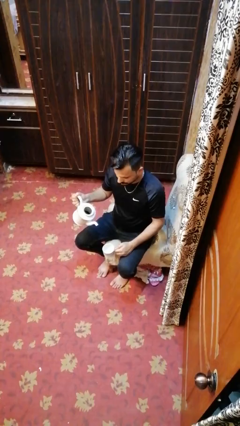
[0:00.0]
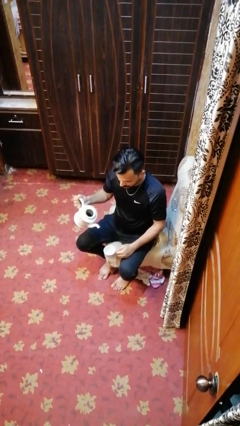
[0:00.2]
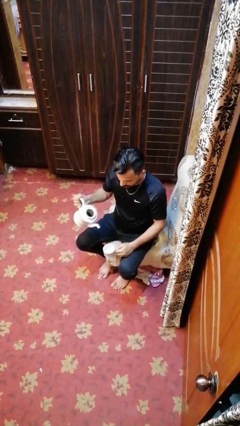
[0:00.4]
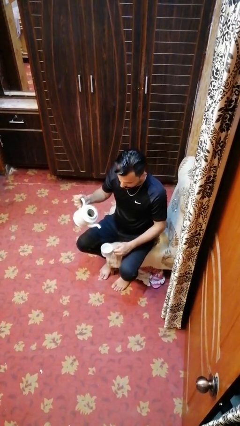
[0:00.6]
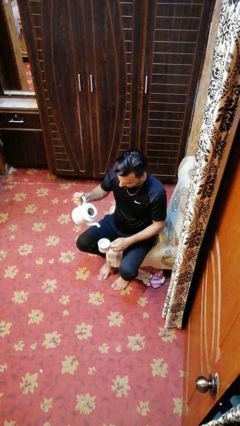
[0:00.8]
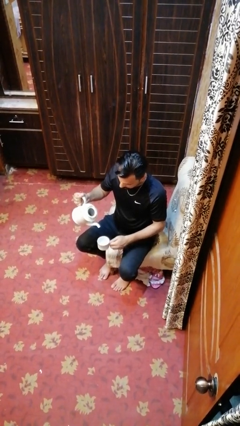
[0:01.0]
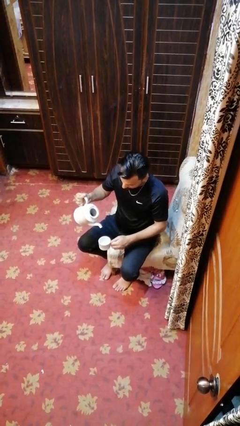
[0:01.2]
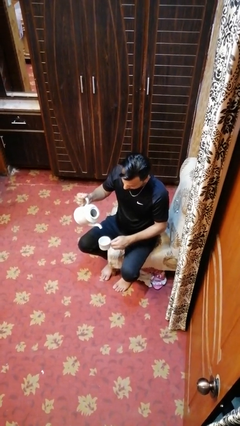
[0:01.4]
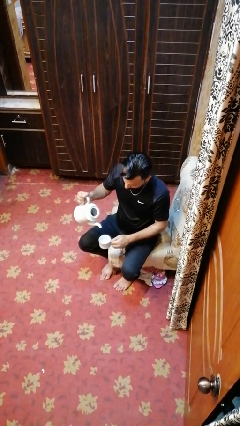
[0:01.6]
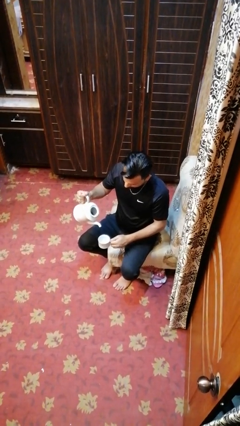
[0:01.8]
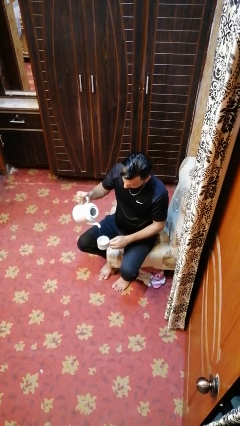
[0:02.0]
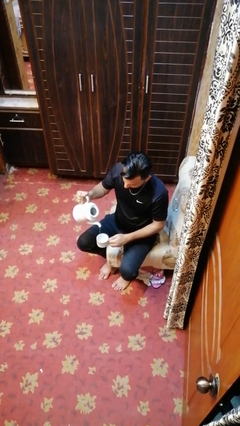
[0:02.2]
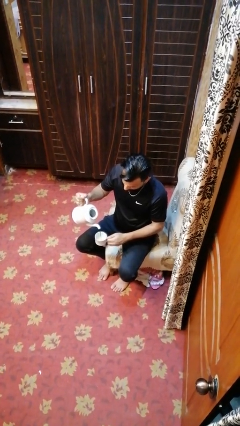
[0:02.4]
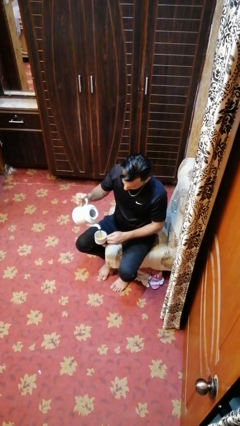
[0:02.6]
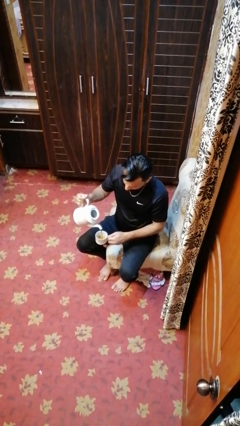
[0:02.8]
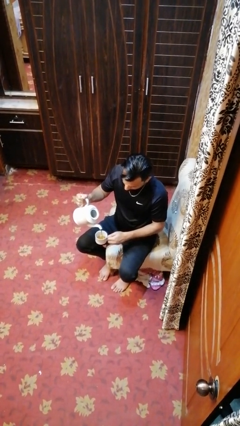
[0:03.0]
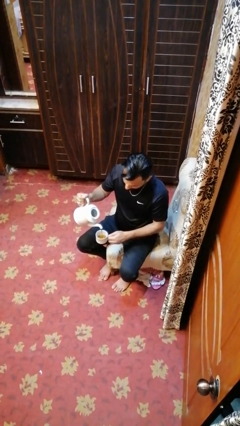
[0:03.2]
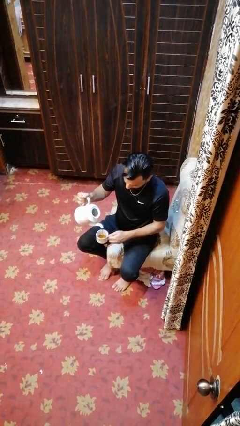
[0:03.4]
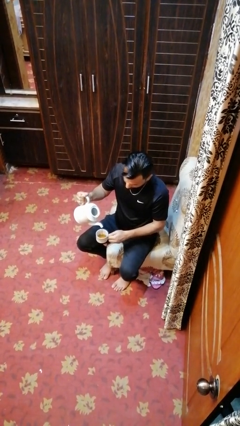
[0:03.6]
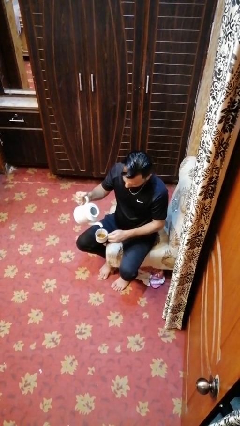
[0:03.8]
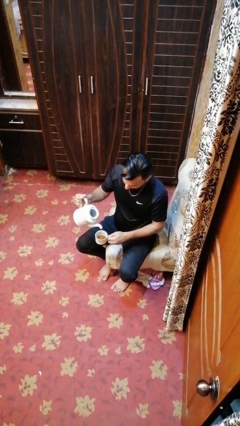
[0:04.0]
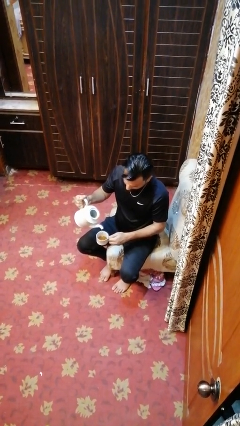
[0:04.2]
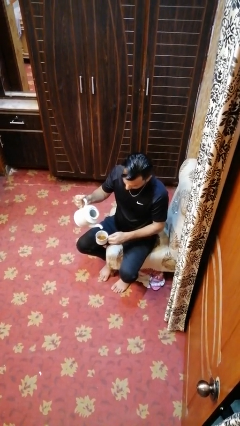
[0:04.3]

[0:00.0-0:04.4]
person pours coffee into mug

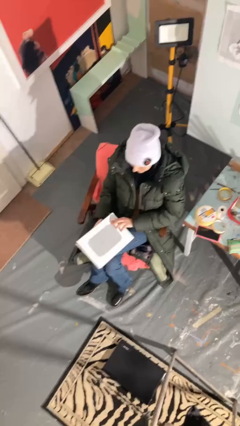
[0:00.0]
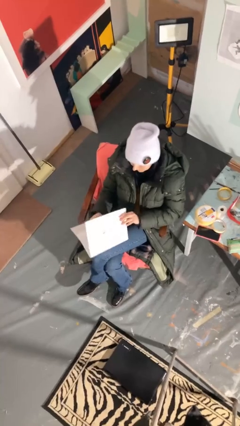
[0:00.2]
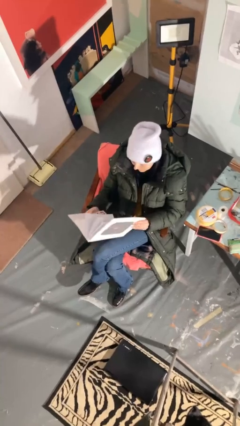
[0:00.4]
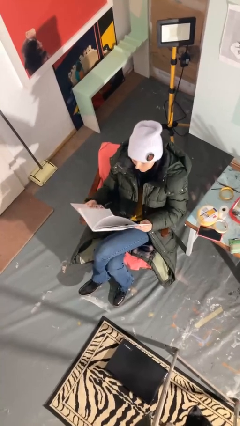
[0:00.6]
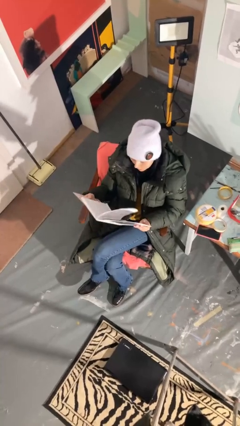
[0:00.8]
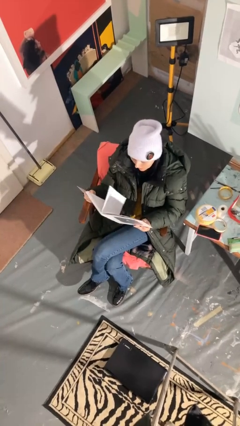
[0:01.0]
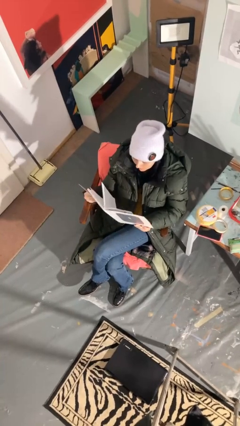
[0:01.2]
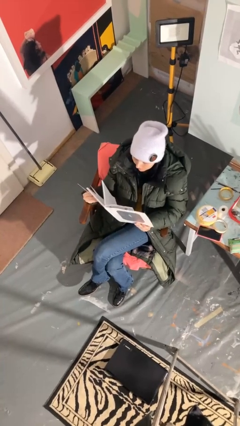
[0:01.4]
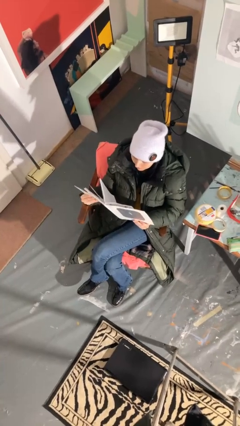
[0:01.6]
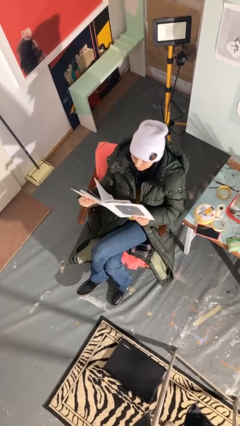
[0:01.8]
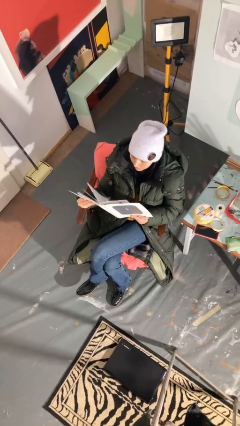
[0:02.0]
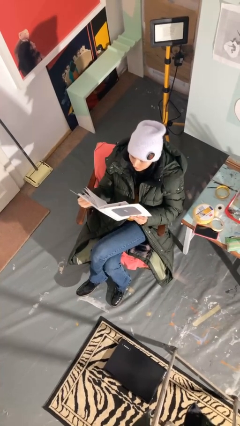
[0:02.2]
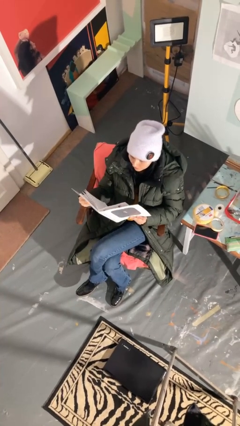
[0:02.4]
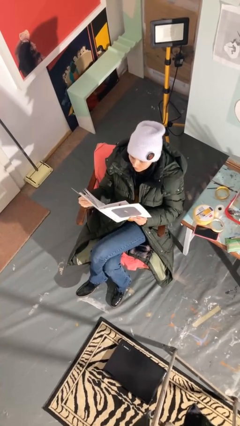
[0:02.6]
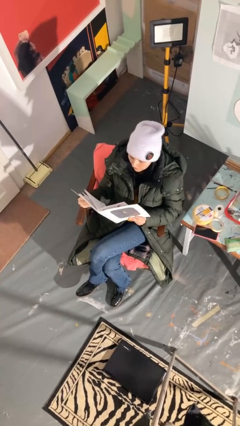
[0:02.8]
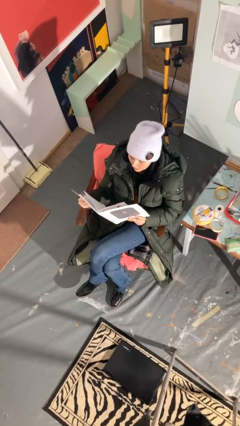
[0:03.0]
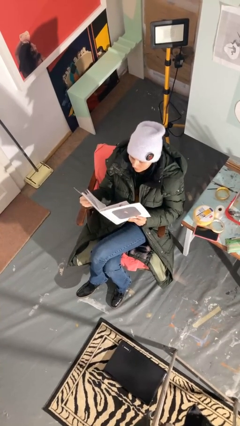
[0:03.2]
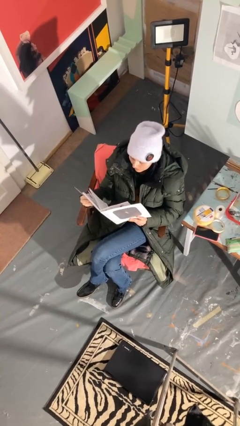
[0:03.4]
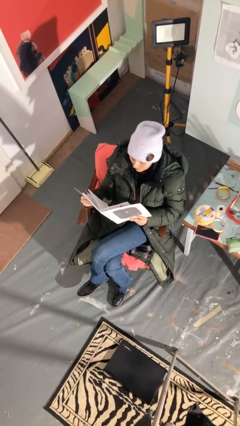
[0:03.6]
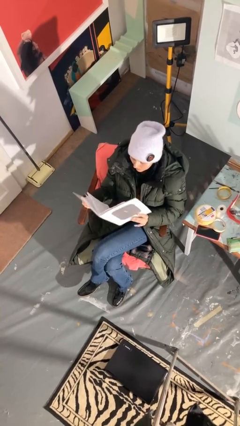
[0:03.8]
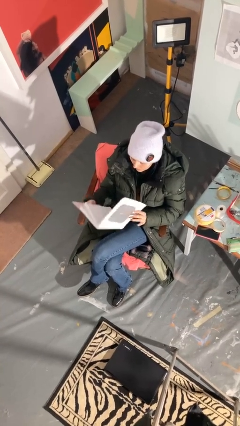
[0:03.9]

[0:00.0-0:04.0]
person reads document

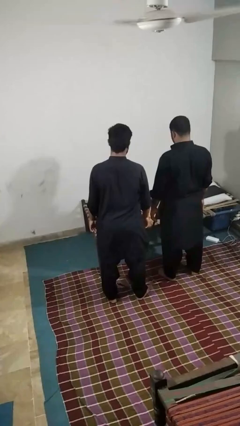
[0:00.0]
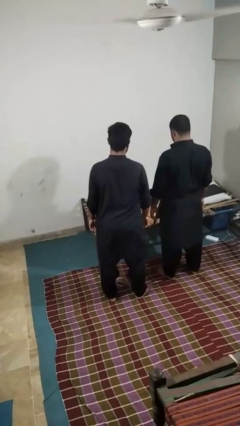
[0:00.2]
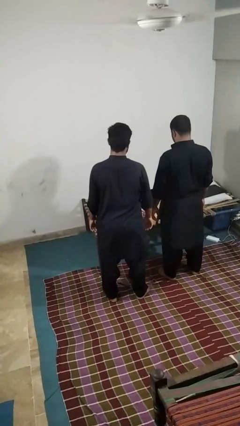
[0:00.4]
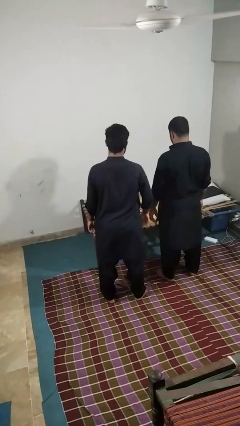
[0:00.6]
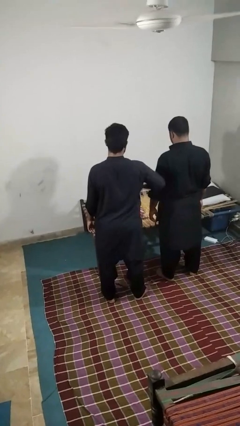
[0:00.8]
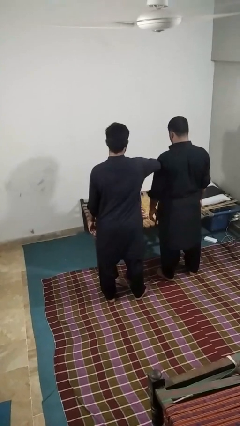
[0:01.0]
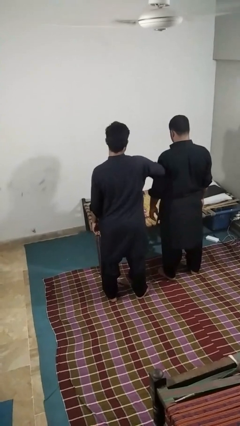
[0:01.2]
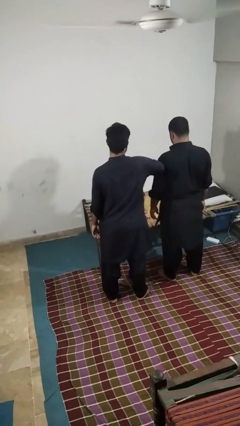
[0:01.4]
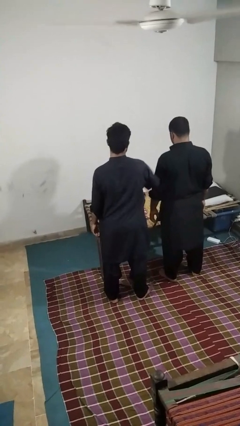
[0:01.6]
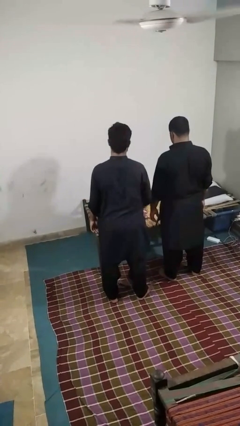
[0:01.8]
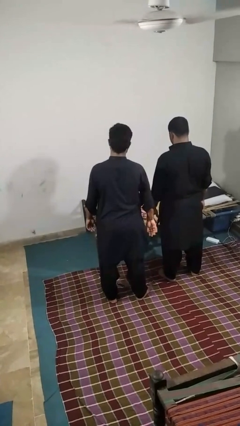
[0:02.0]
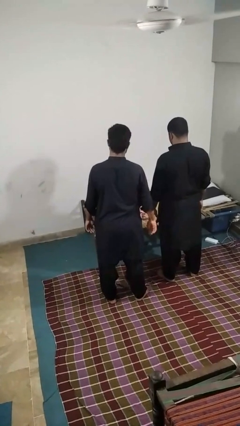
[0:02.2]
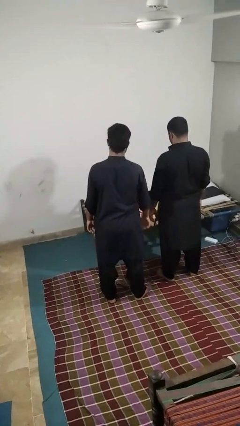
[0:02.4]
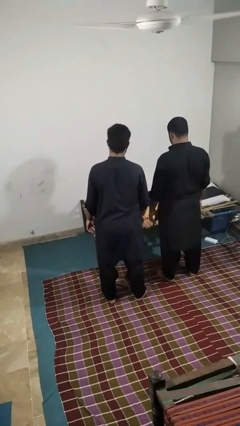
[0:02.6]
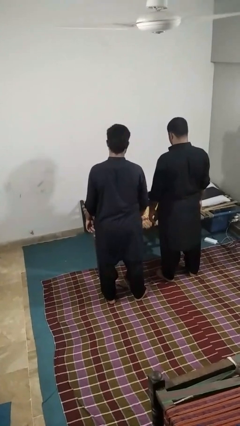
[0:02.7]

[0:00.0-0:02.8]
person nudges person with elbow

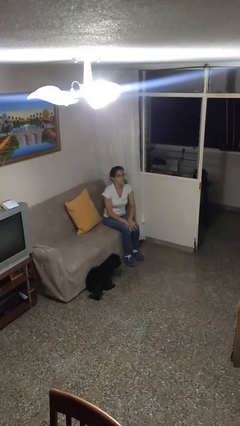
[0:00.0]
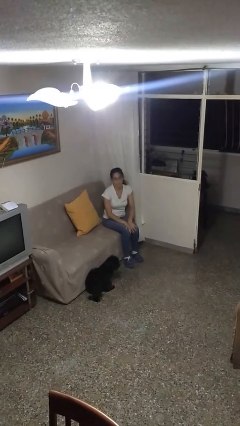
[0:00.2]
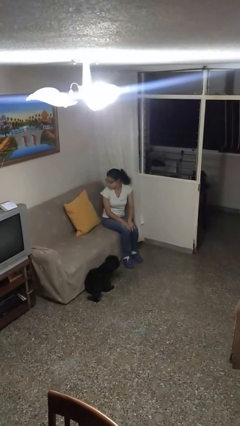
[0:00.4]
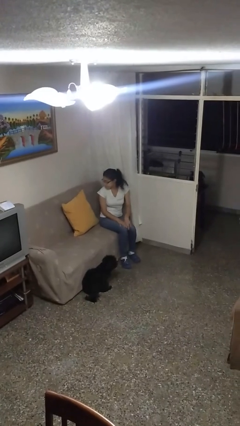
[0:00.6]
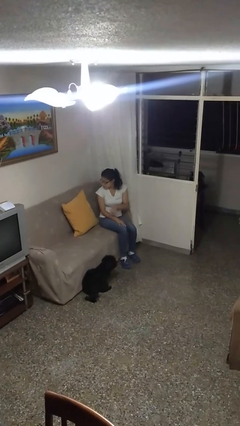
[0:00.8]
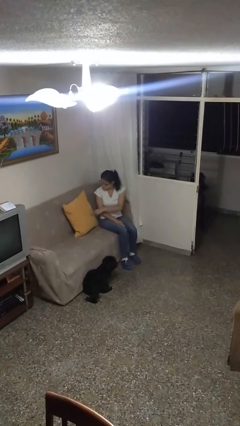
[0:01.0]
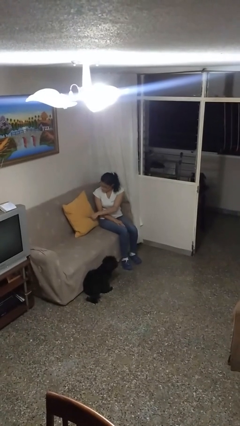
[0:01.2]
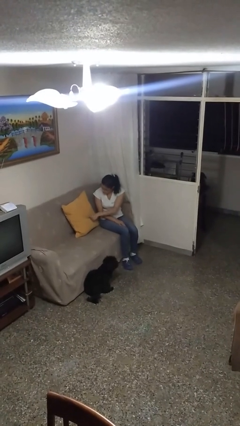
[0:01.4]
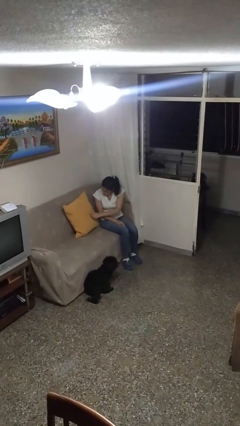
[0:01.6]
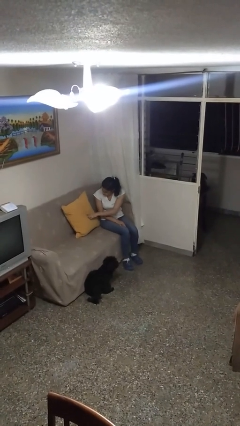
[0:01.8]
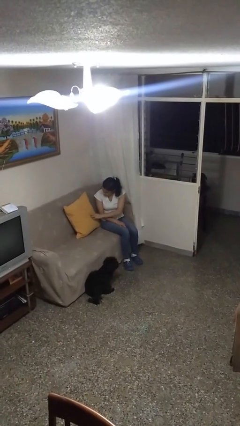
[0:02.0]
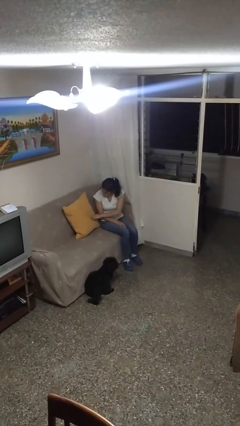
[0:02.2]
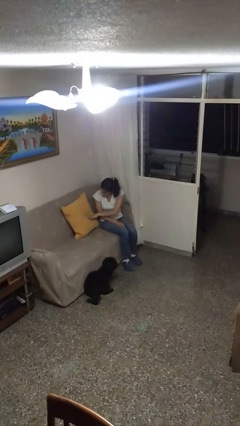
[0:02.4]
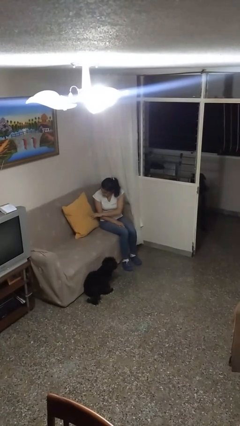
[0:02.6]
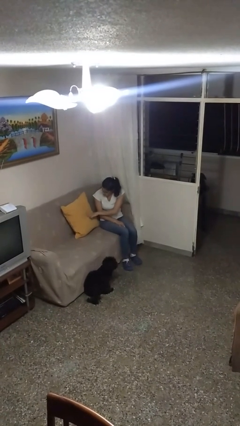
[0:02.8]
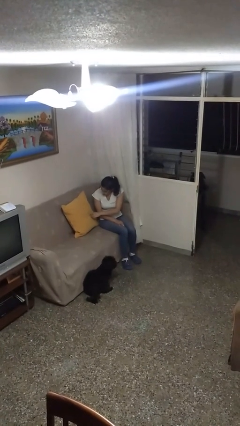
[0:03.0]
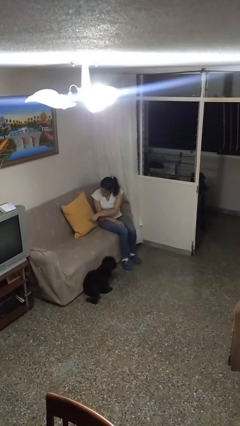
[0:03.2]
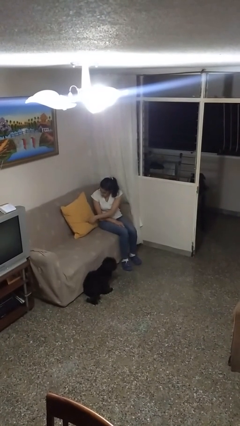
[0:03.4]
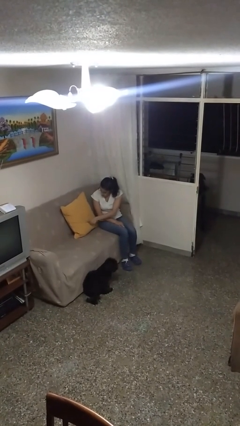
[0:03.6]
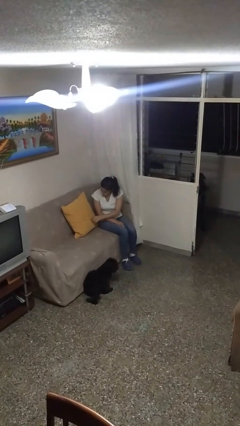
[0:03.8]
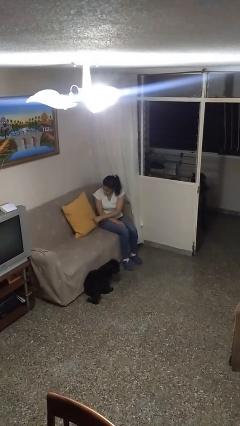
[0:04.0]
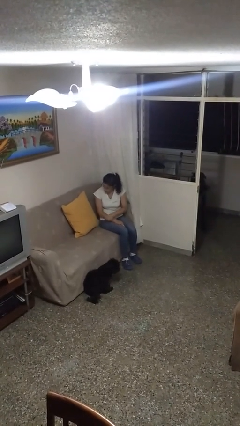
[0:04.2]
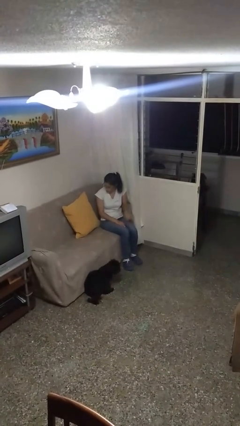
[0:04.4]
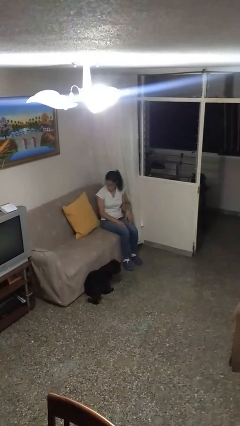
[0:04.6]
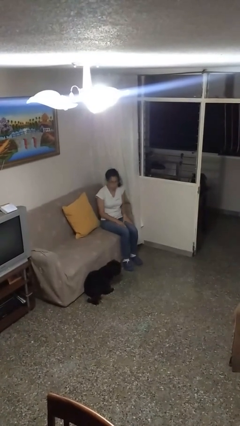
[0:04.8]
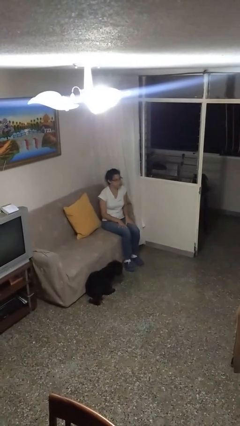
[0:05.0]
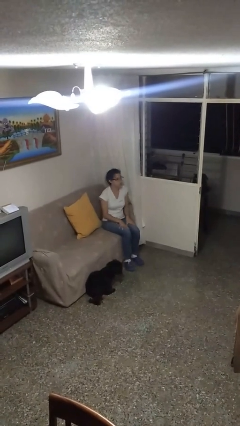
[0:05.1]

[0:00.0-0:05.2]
person taps object with finger

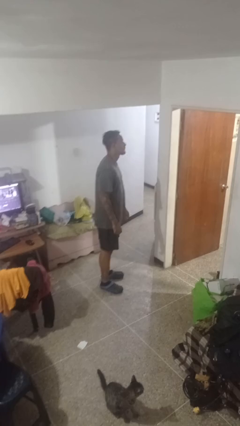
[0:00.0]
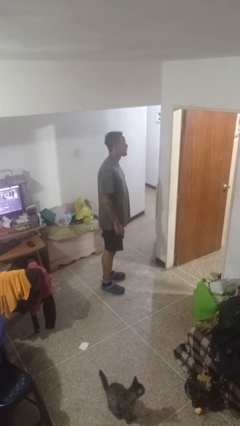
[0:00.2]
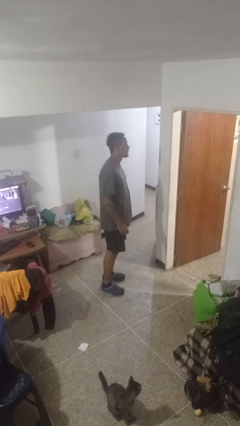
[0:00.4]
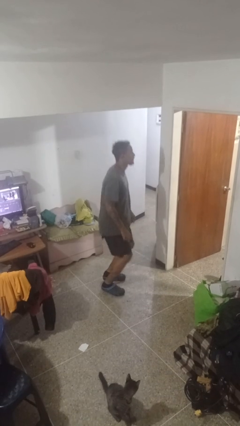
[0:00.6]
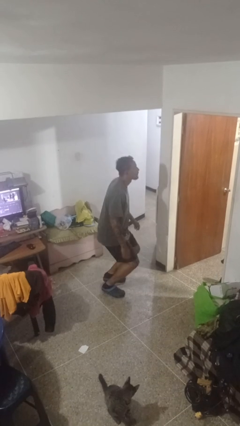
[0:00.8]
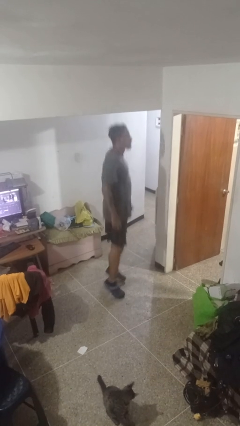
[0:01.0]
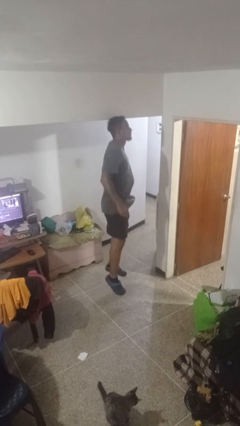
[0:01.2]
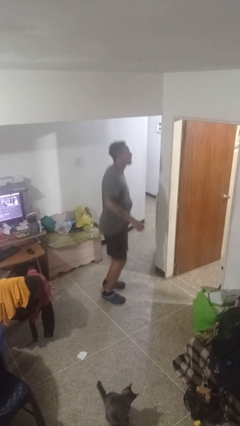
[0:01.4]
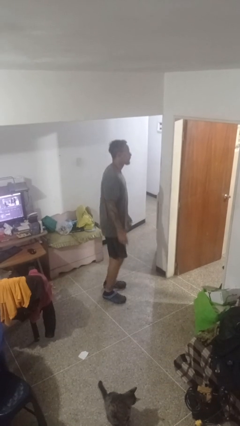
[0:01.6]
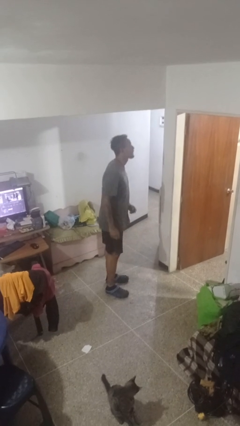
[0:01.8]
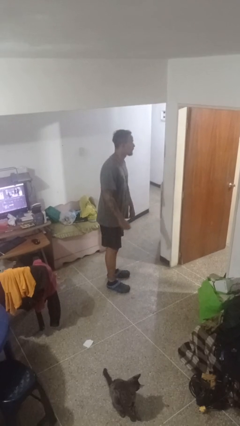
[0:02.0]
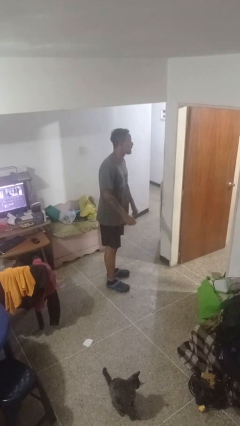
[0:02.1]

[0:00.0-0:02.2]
person jumps
